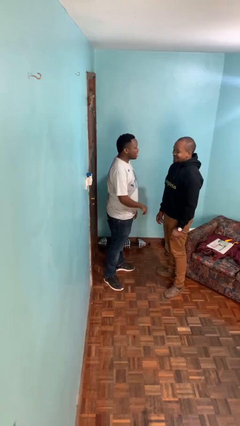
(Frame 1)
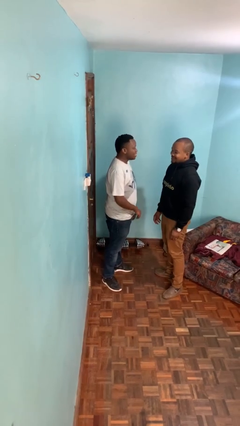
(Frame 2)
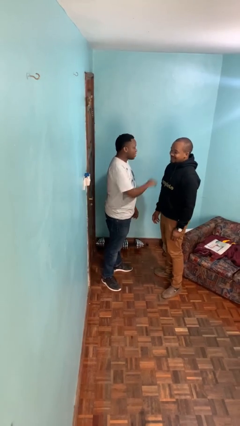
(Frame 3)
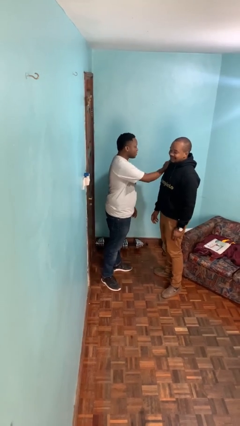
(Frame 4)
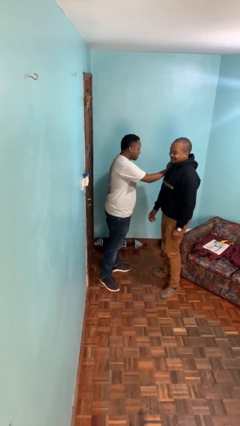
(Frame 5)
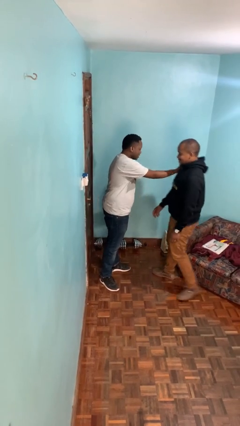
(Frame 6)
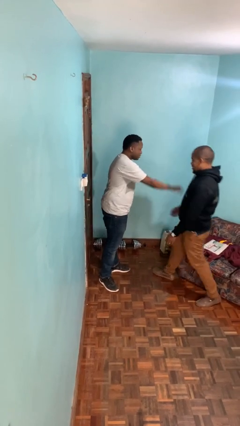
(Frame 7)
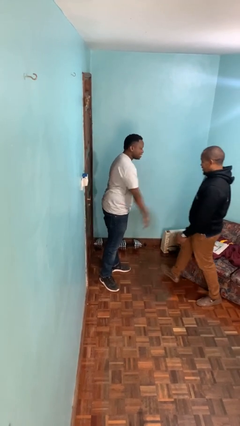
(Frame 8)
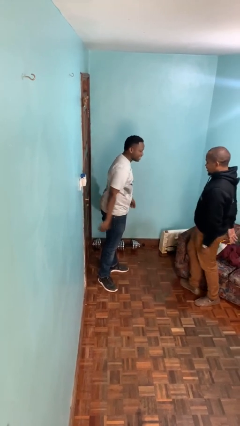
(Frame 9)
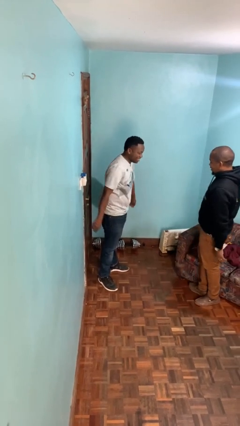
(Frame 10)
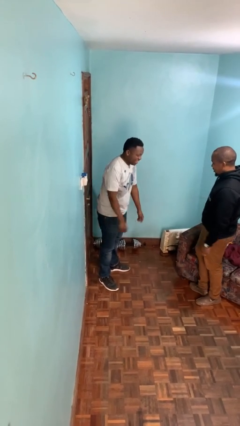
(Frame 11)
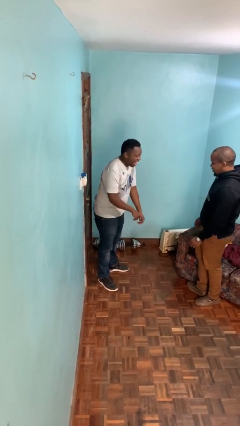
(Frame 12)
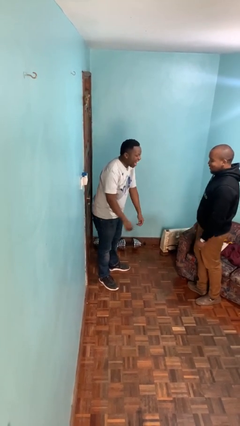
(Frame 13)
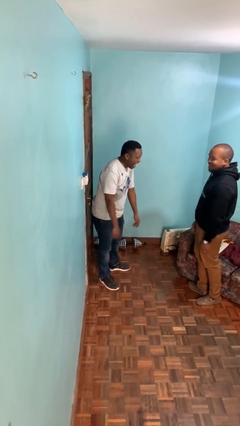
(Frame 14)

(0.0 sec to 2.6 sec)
person shoves person

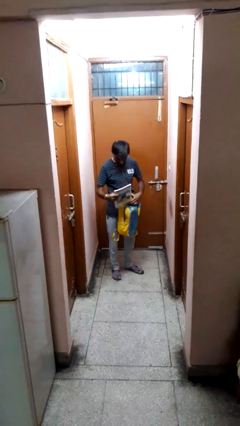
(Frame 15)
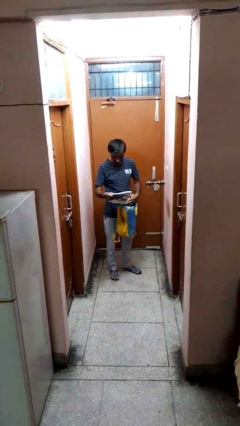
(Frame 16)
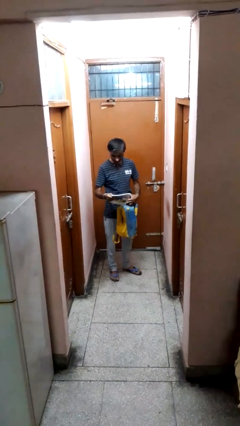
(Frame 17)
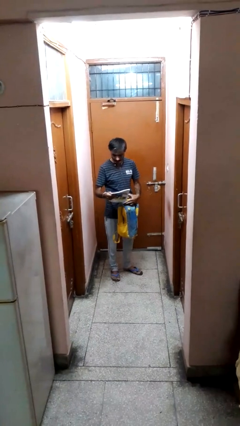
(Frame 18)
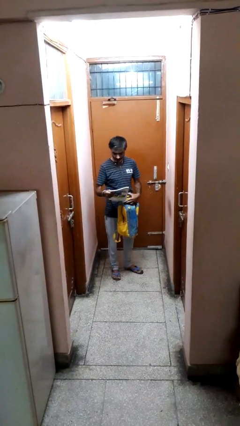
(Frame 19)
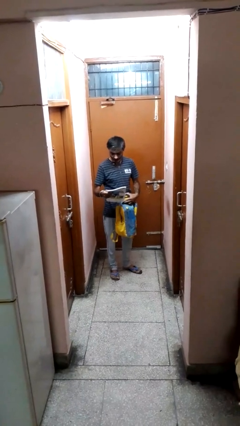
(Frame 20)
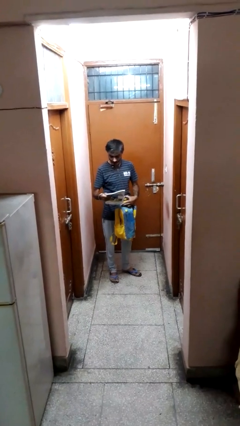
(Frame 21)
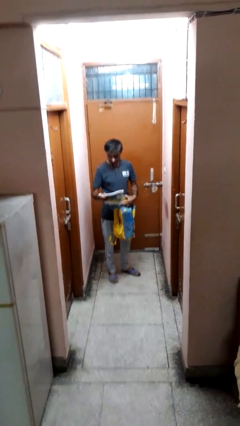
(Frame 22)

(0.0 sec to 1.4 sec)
person takes object from backpack

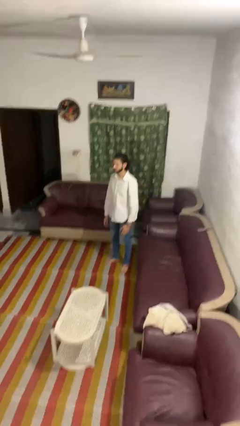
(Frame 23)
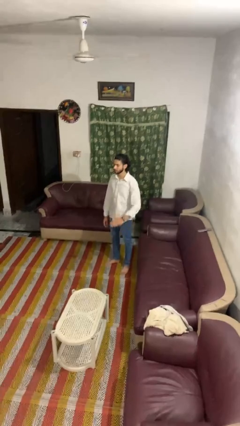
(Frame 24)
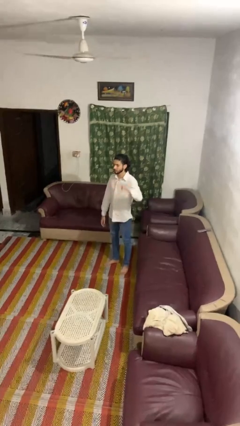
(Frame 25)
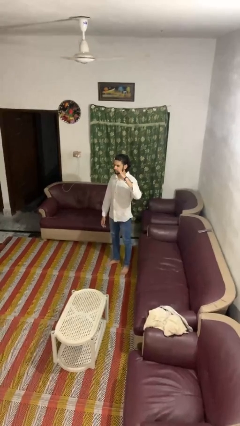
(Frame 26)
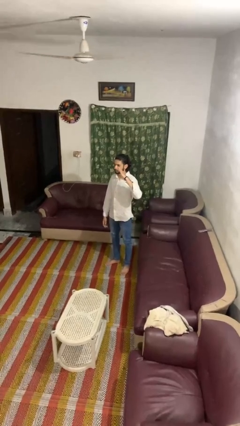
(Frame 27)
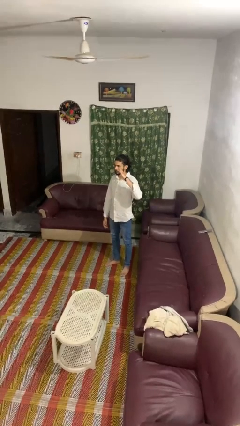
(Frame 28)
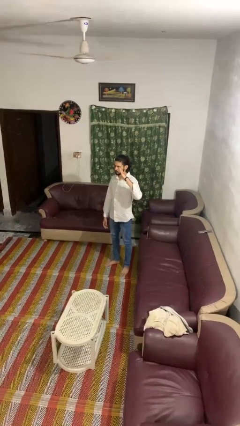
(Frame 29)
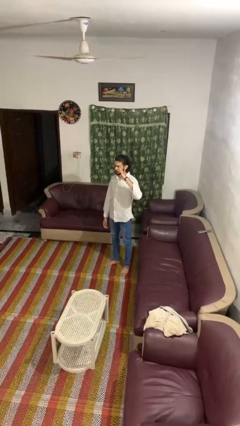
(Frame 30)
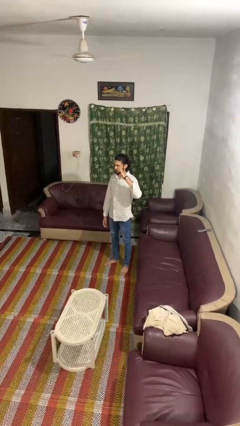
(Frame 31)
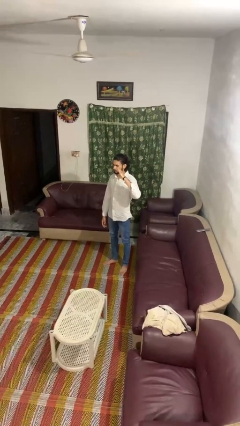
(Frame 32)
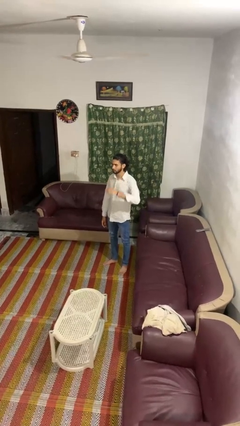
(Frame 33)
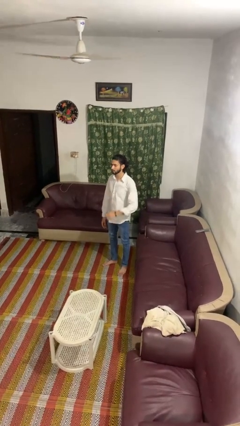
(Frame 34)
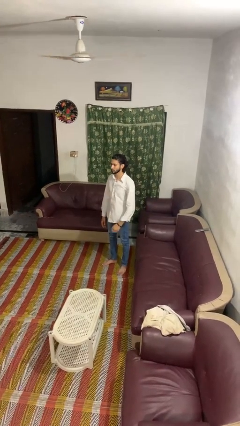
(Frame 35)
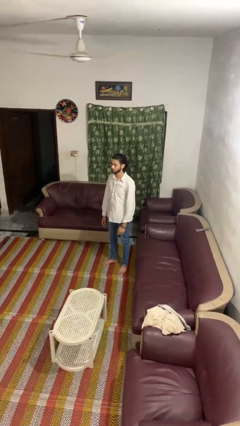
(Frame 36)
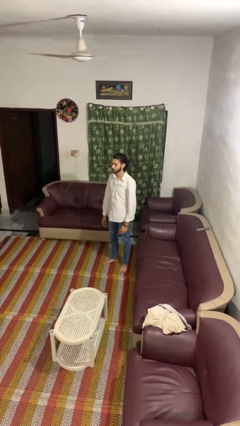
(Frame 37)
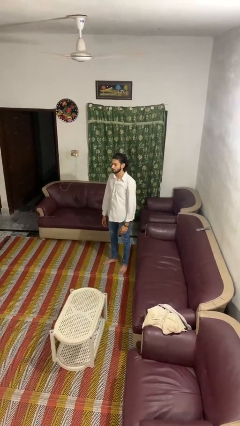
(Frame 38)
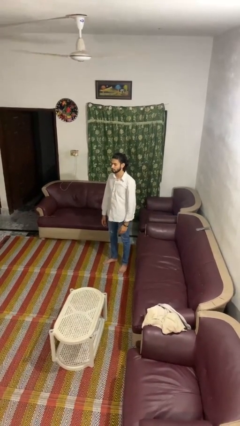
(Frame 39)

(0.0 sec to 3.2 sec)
person salutes

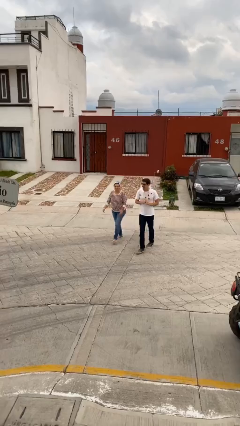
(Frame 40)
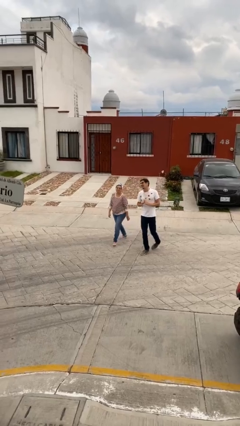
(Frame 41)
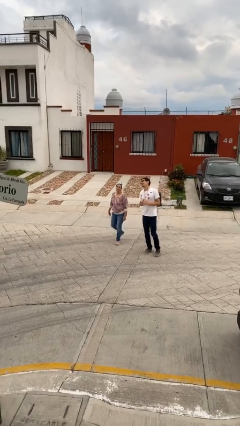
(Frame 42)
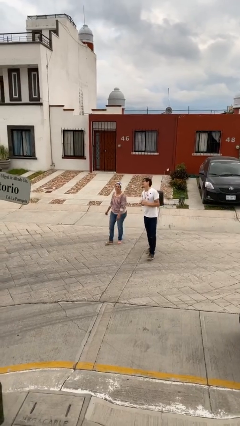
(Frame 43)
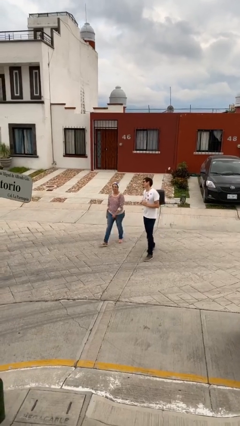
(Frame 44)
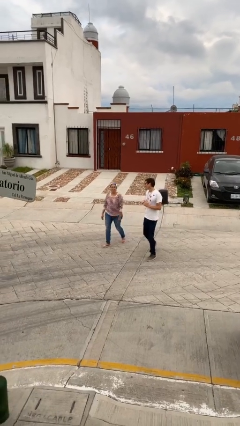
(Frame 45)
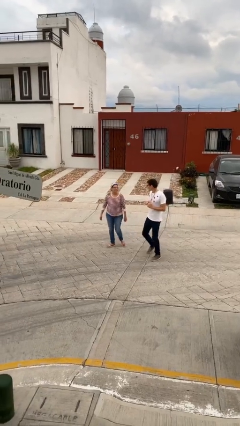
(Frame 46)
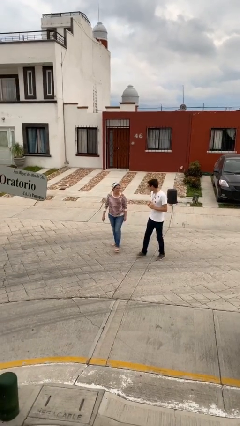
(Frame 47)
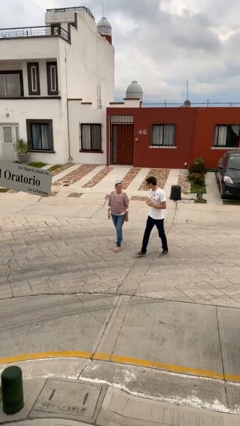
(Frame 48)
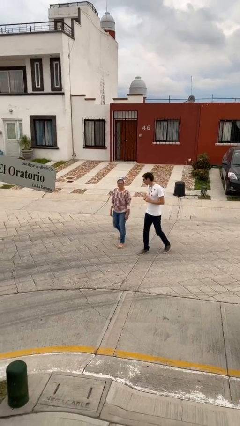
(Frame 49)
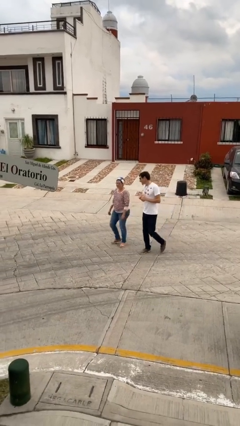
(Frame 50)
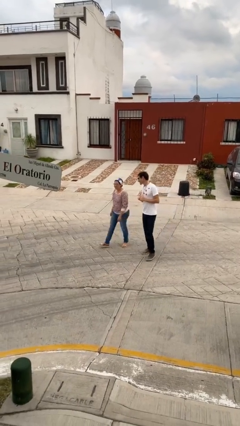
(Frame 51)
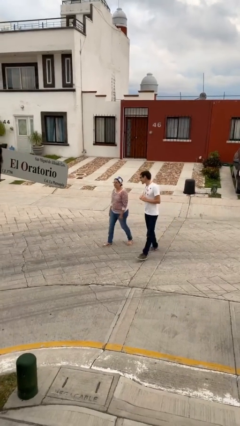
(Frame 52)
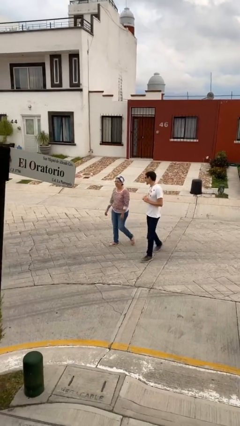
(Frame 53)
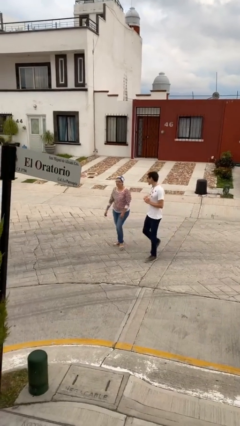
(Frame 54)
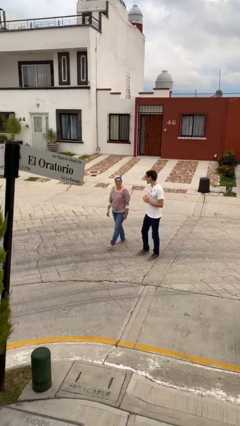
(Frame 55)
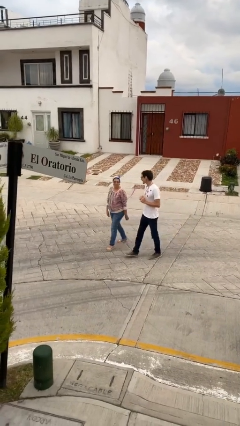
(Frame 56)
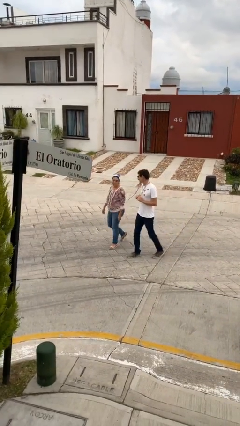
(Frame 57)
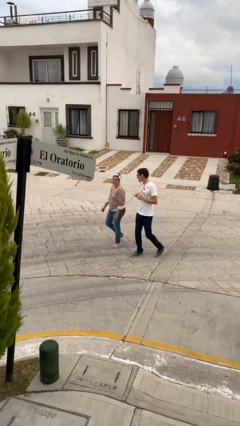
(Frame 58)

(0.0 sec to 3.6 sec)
person talks to person

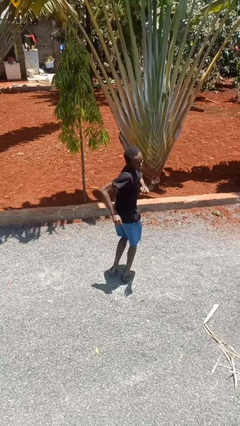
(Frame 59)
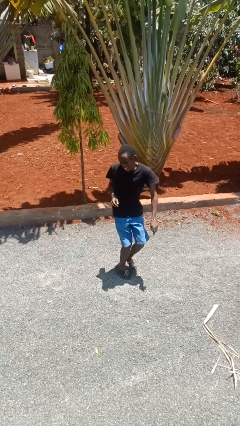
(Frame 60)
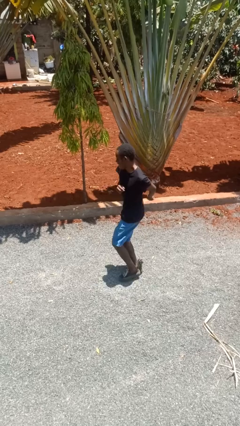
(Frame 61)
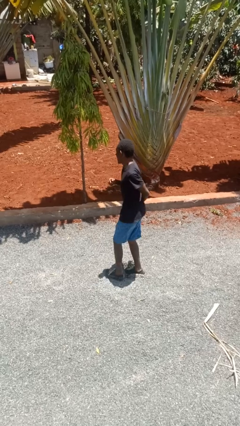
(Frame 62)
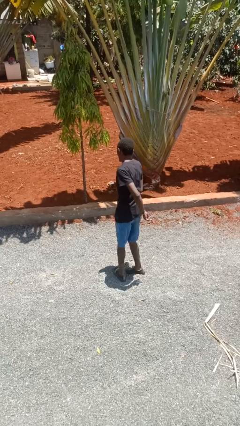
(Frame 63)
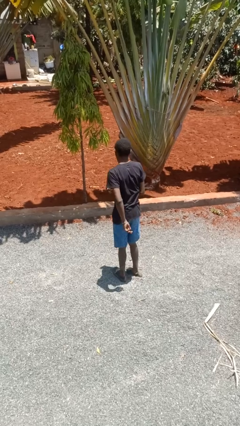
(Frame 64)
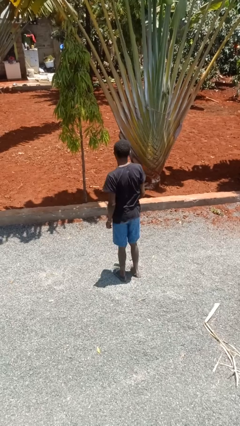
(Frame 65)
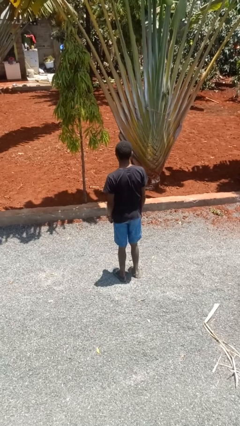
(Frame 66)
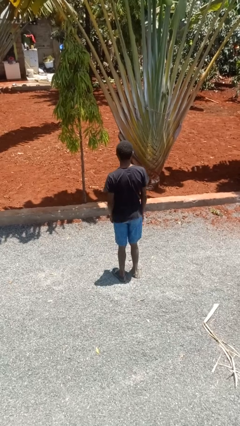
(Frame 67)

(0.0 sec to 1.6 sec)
person twirls

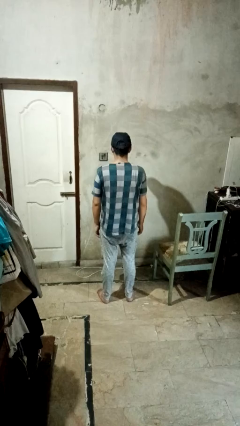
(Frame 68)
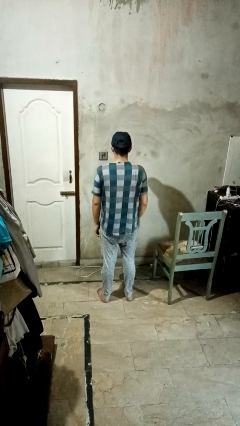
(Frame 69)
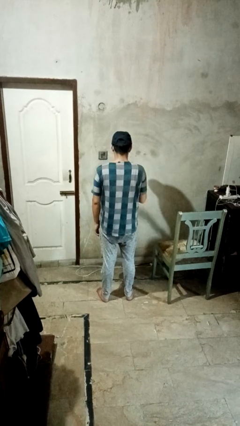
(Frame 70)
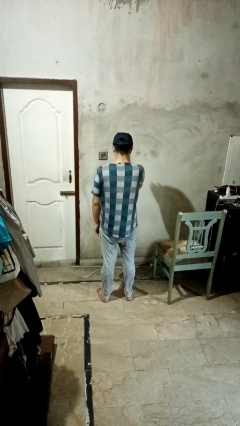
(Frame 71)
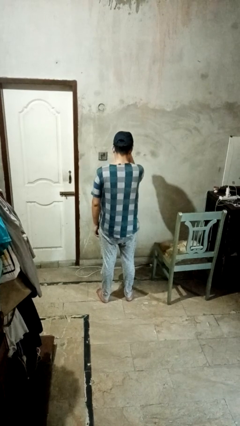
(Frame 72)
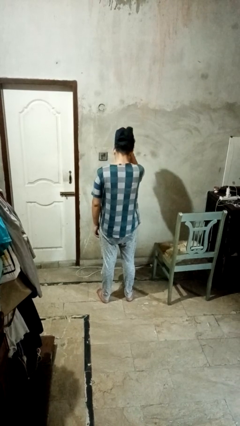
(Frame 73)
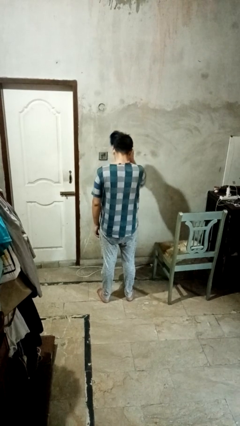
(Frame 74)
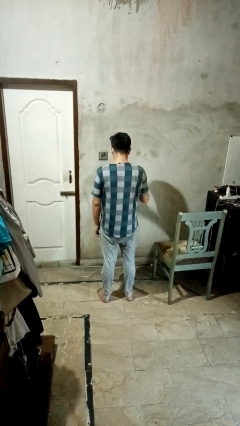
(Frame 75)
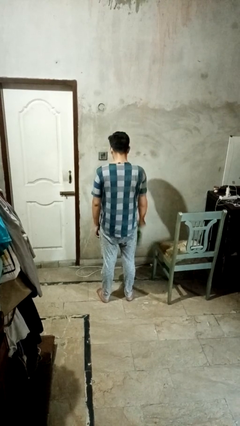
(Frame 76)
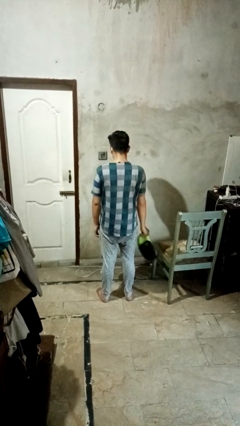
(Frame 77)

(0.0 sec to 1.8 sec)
person takes off hat

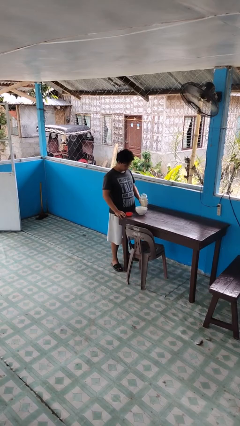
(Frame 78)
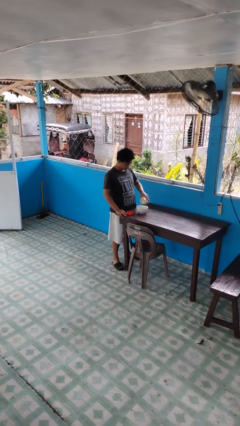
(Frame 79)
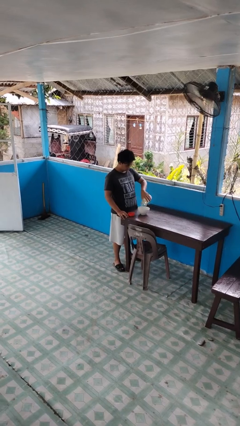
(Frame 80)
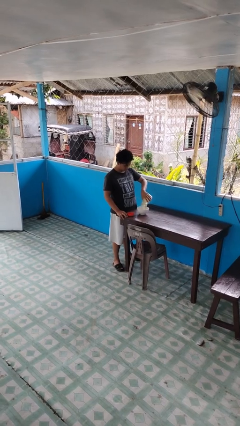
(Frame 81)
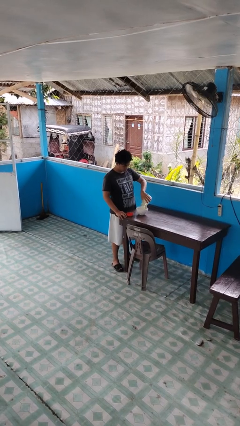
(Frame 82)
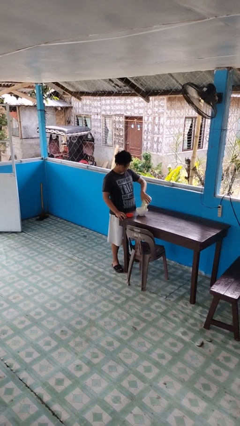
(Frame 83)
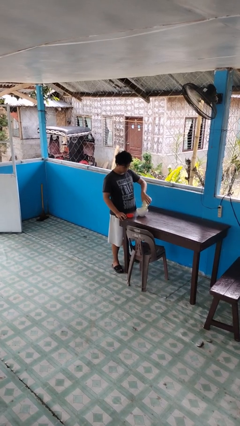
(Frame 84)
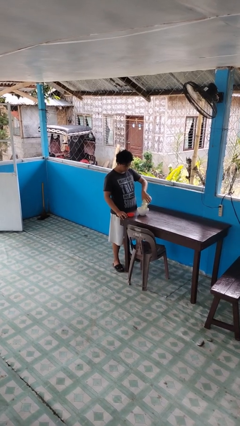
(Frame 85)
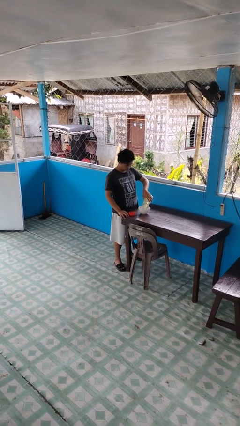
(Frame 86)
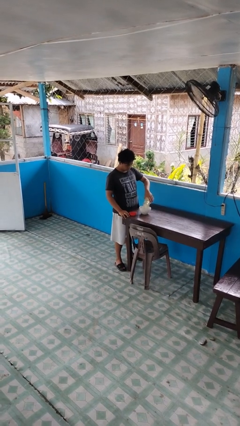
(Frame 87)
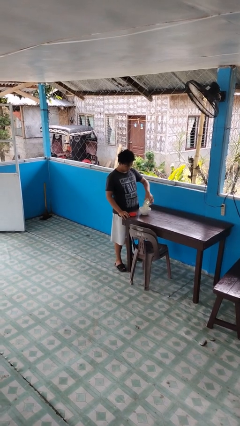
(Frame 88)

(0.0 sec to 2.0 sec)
person pours into bowl

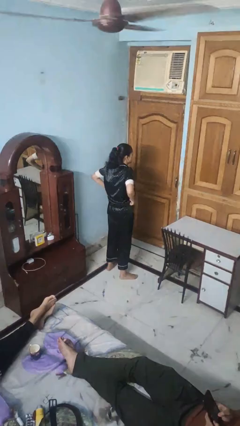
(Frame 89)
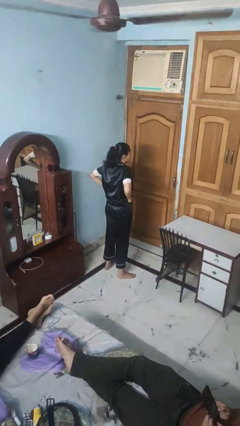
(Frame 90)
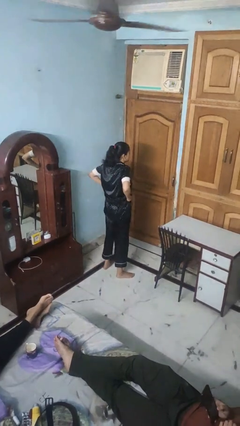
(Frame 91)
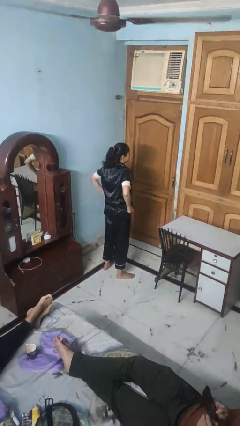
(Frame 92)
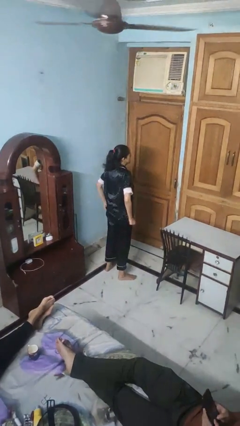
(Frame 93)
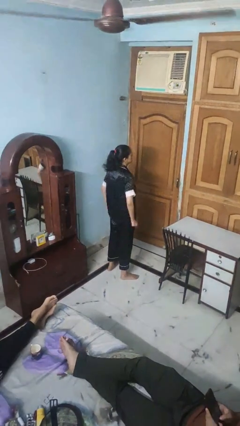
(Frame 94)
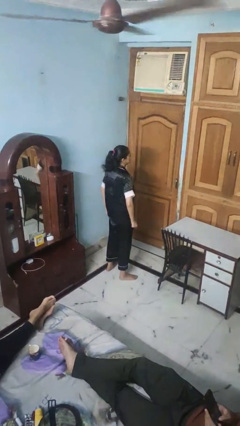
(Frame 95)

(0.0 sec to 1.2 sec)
person hikes up pants
